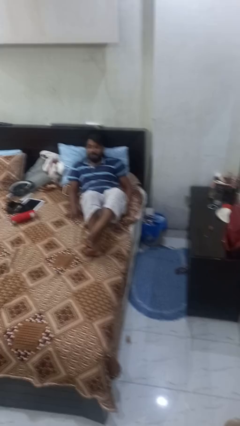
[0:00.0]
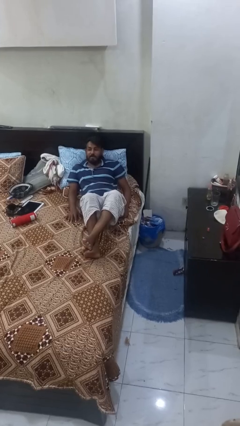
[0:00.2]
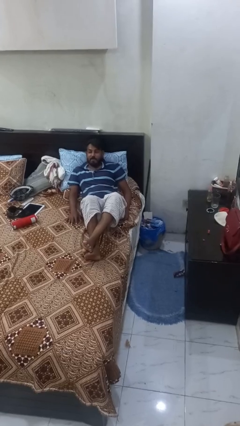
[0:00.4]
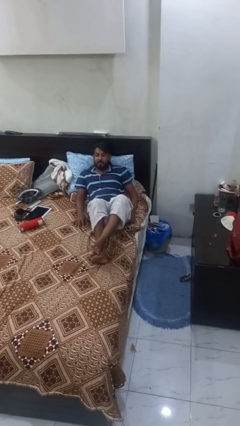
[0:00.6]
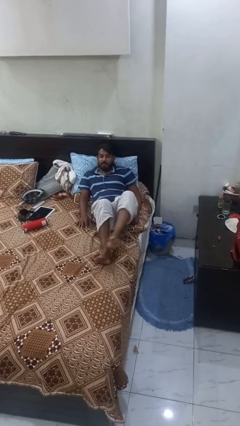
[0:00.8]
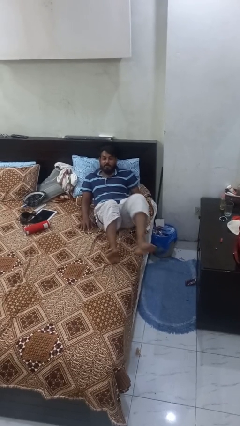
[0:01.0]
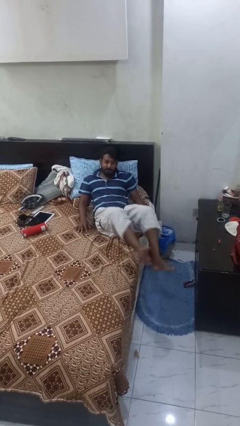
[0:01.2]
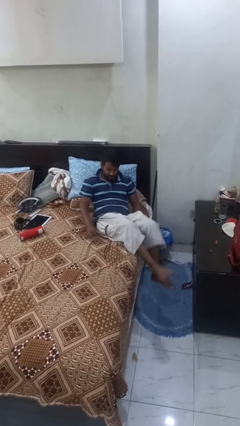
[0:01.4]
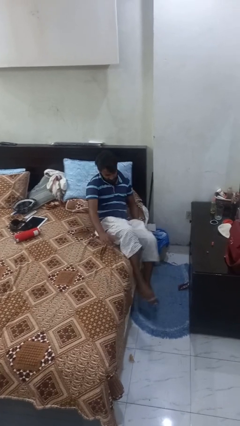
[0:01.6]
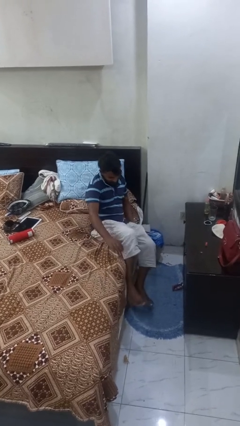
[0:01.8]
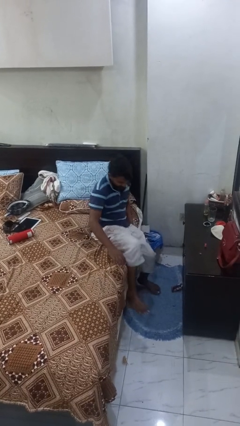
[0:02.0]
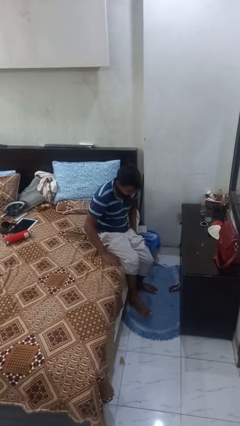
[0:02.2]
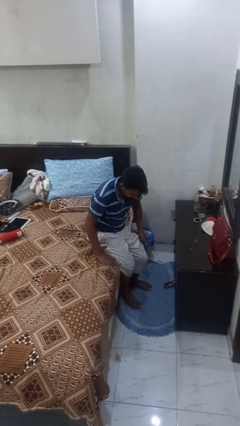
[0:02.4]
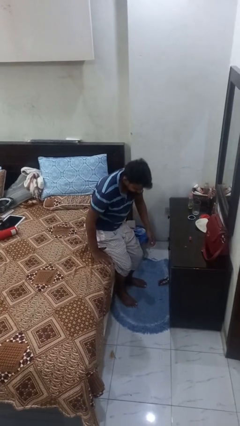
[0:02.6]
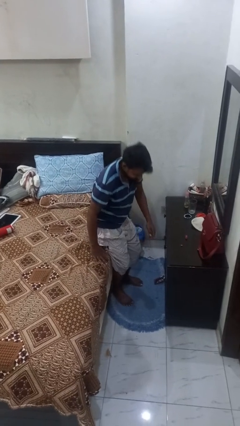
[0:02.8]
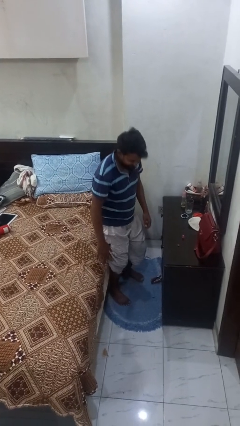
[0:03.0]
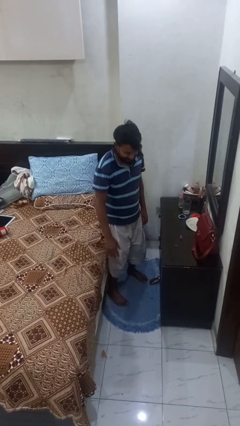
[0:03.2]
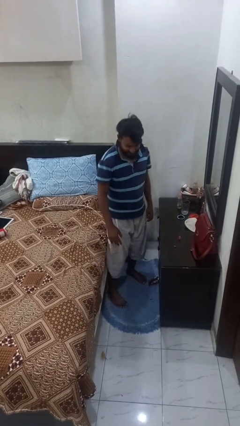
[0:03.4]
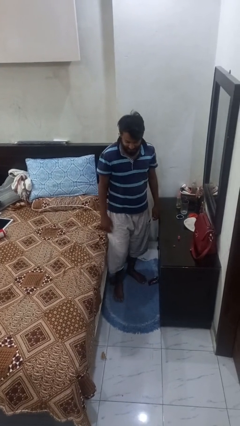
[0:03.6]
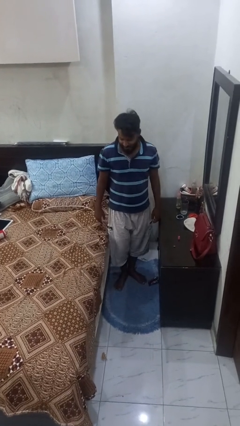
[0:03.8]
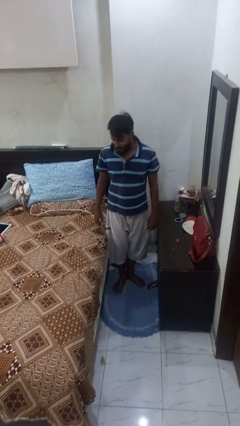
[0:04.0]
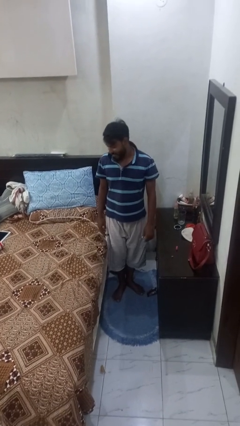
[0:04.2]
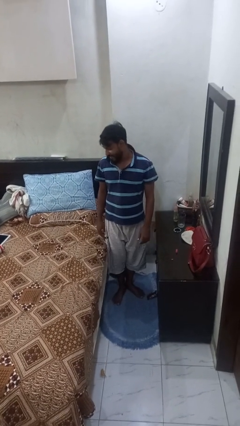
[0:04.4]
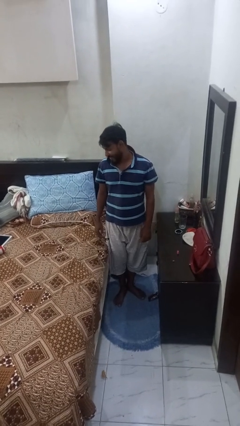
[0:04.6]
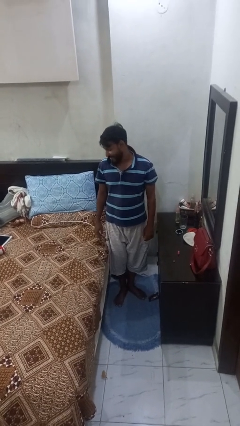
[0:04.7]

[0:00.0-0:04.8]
person stands up

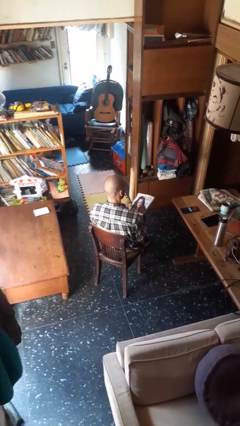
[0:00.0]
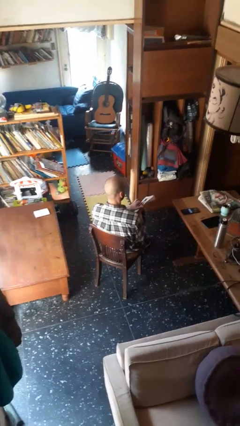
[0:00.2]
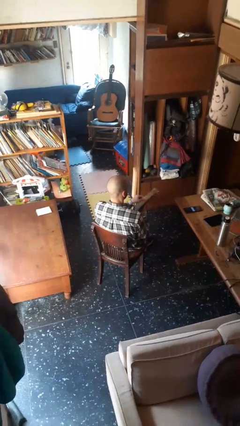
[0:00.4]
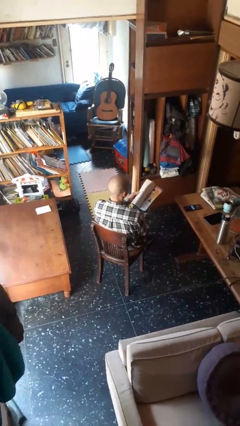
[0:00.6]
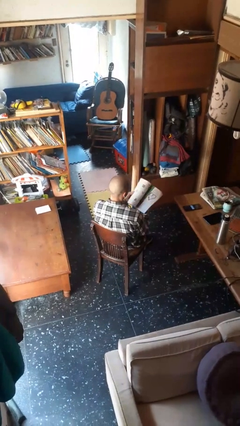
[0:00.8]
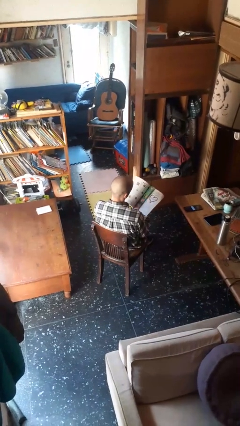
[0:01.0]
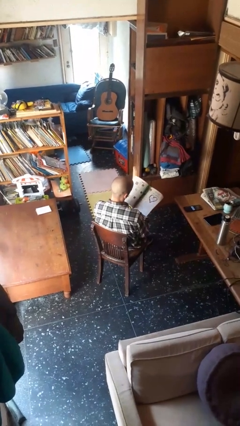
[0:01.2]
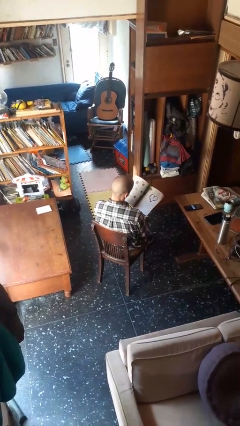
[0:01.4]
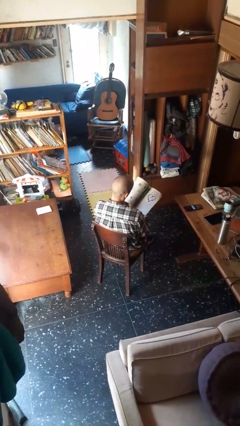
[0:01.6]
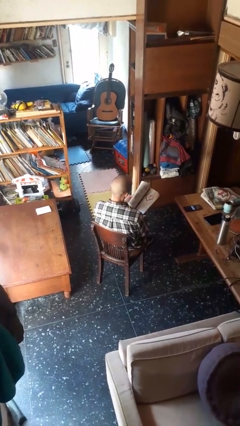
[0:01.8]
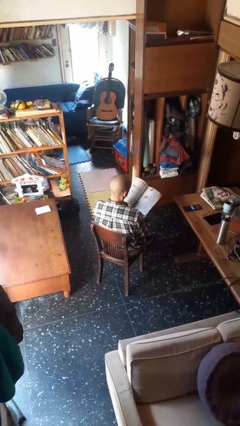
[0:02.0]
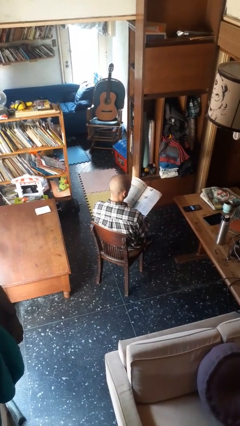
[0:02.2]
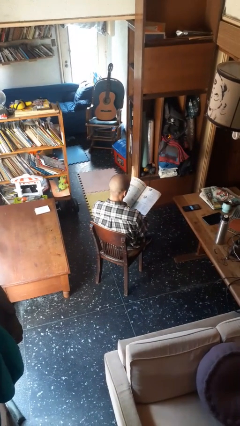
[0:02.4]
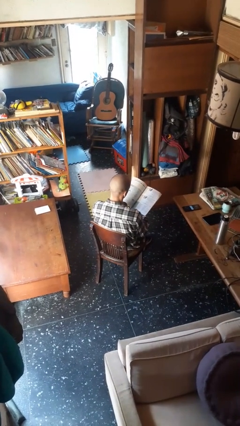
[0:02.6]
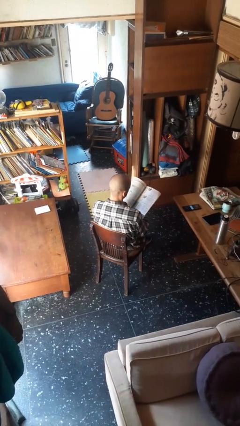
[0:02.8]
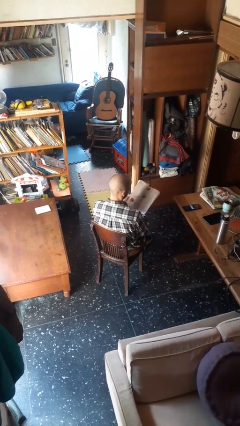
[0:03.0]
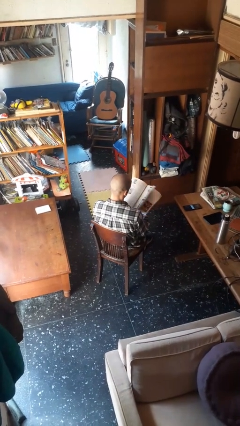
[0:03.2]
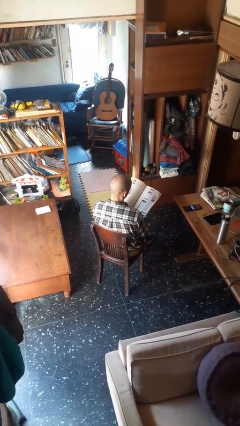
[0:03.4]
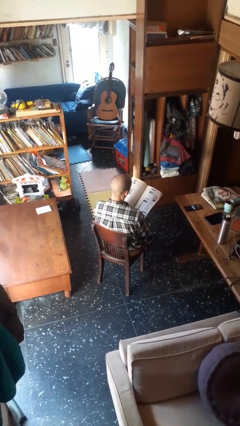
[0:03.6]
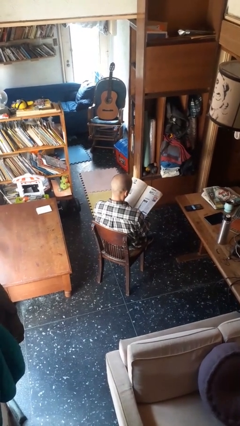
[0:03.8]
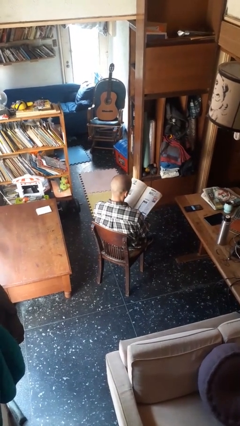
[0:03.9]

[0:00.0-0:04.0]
person reads magazine

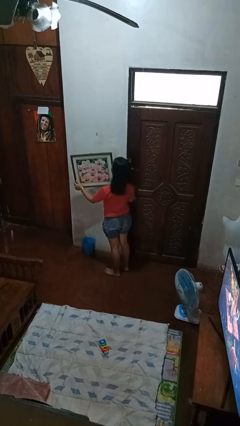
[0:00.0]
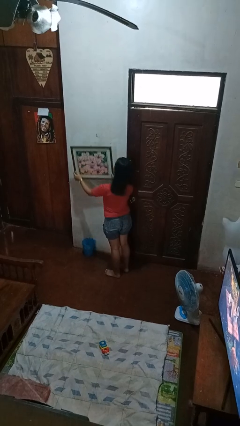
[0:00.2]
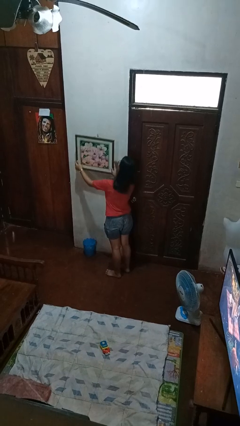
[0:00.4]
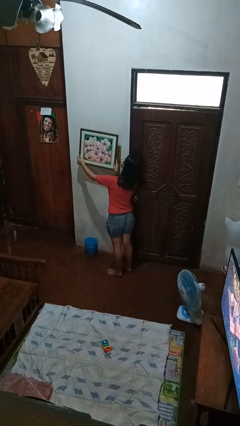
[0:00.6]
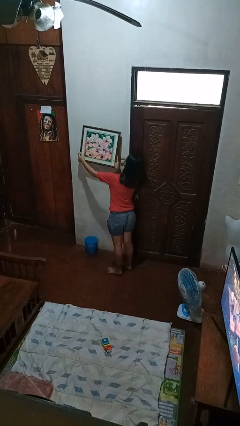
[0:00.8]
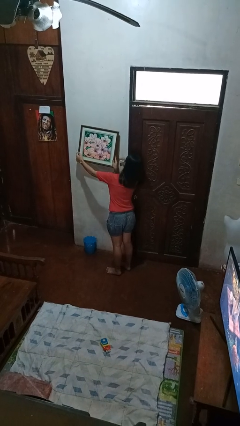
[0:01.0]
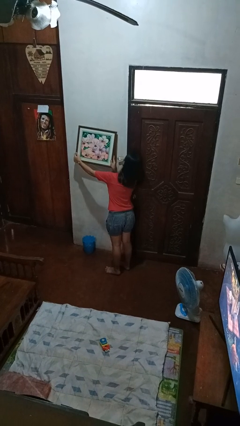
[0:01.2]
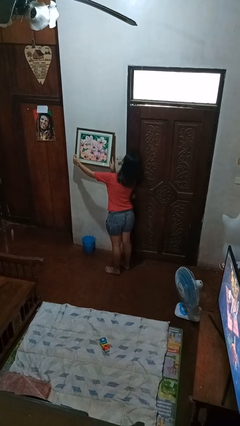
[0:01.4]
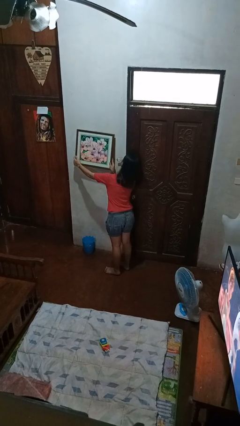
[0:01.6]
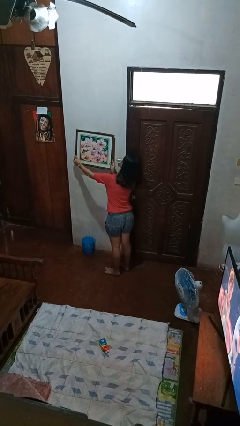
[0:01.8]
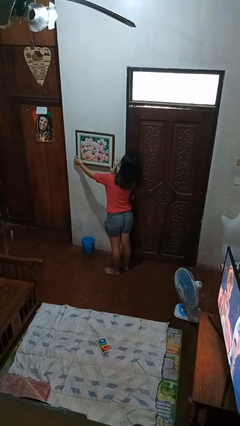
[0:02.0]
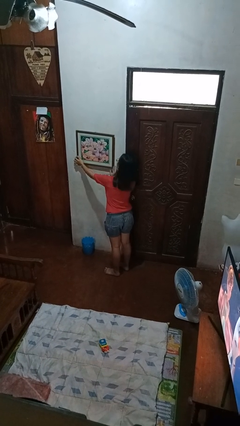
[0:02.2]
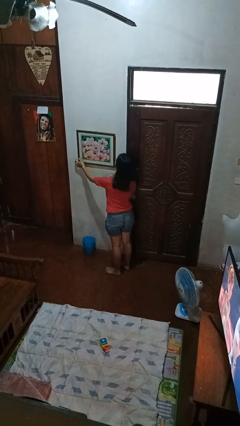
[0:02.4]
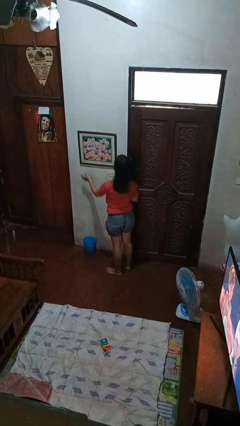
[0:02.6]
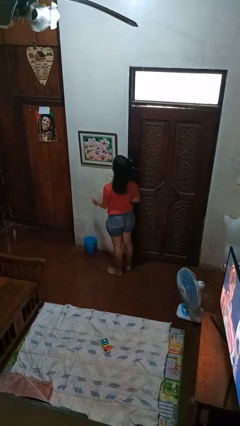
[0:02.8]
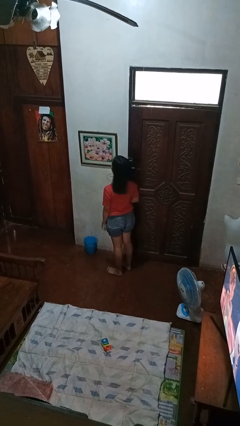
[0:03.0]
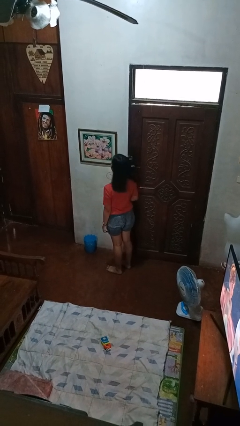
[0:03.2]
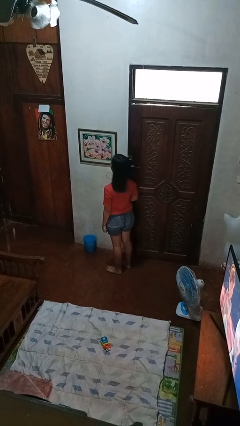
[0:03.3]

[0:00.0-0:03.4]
person puts up picture frame

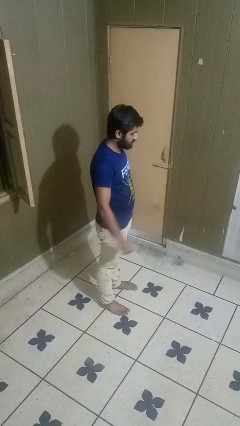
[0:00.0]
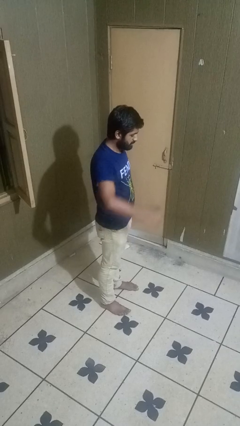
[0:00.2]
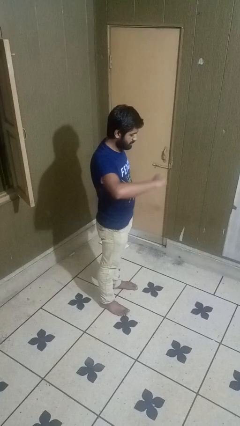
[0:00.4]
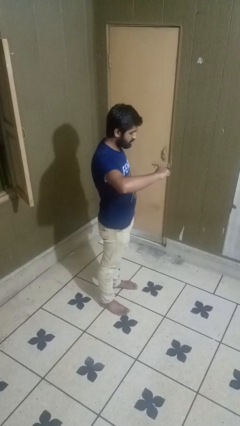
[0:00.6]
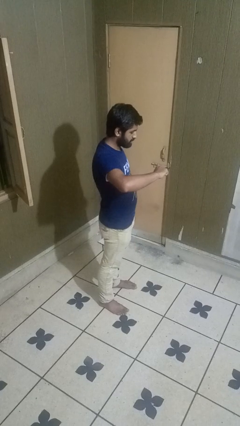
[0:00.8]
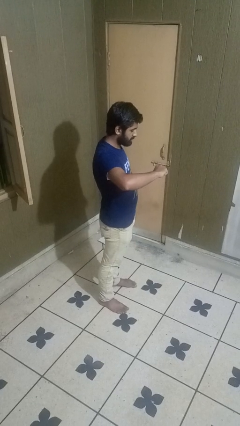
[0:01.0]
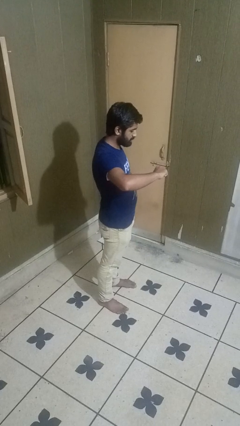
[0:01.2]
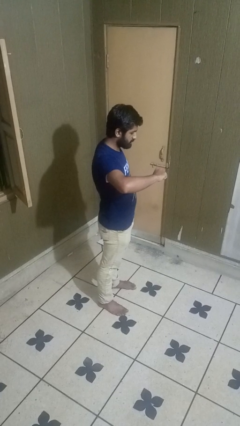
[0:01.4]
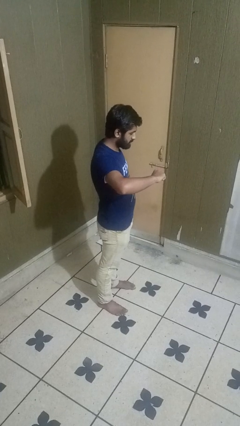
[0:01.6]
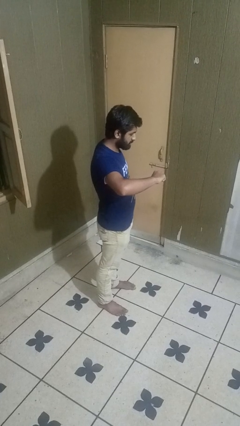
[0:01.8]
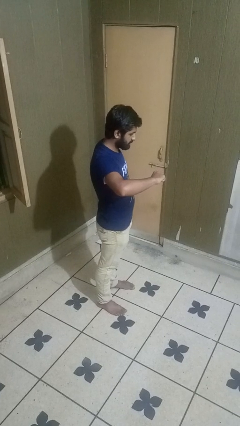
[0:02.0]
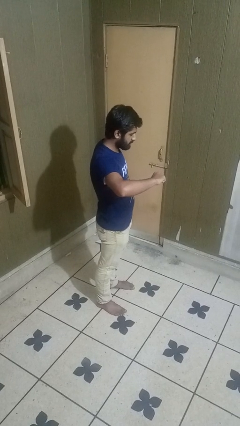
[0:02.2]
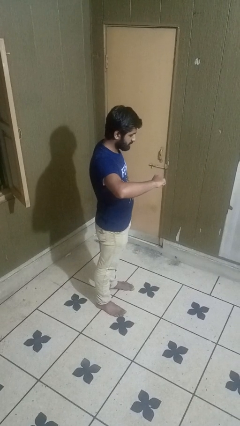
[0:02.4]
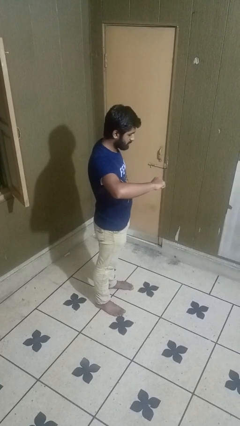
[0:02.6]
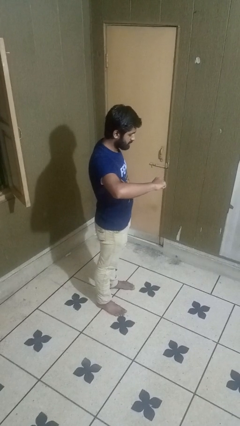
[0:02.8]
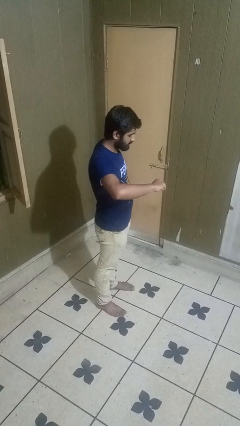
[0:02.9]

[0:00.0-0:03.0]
person karate chop

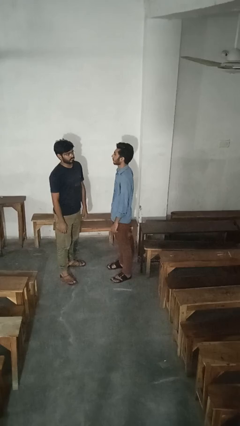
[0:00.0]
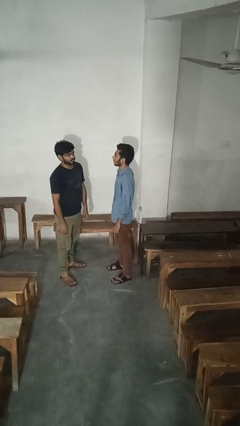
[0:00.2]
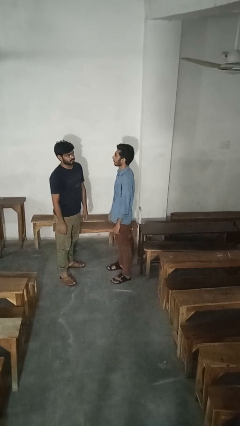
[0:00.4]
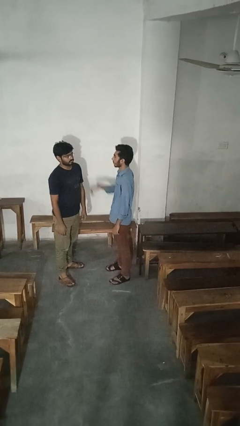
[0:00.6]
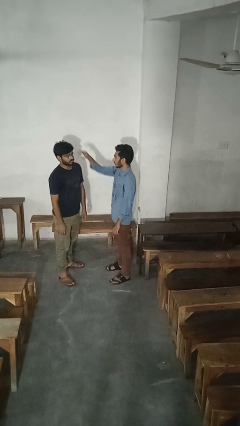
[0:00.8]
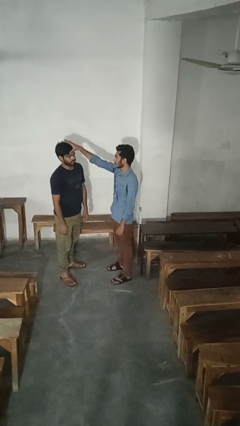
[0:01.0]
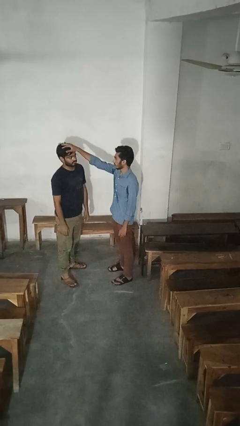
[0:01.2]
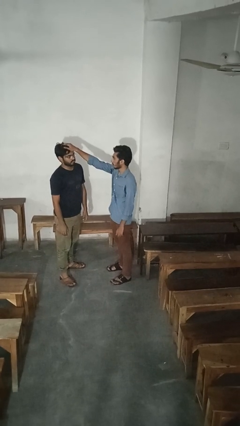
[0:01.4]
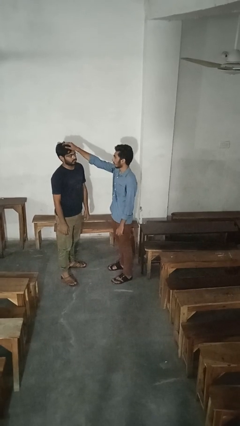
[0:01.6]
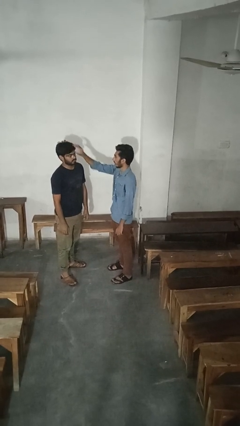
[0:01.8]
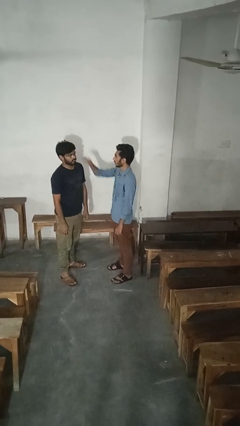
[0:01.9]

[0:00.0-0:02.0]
person grabs person by hair

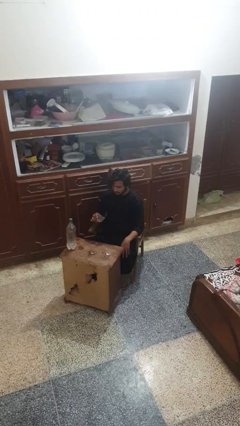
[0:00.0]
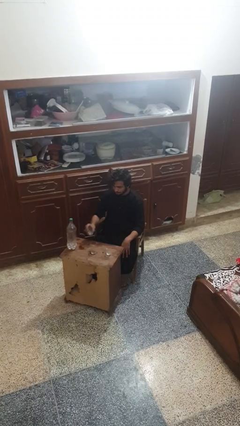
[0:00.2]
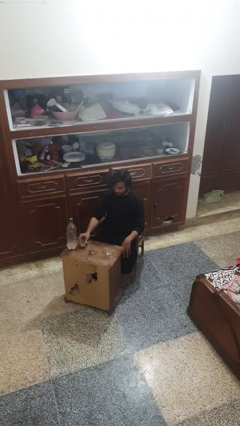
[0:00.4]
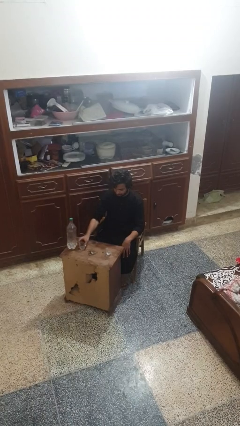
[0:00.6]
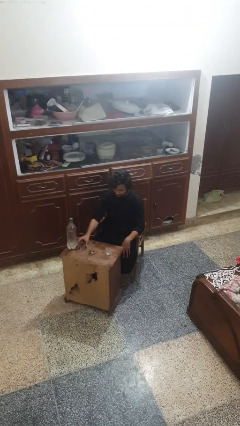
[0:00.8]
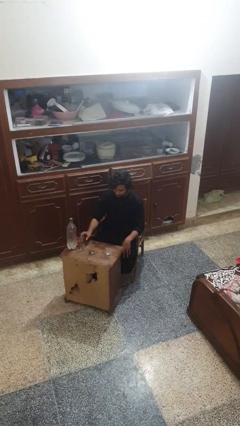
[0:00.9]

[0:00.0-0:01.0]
person puts down object on table
